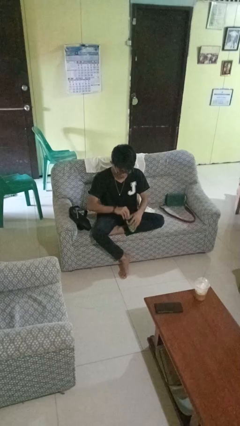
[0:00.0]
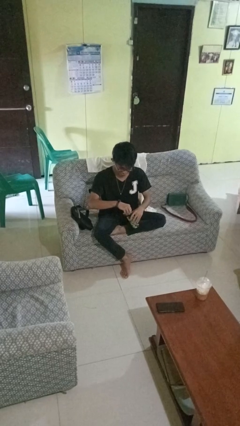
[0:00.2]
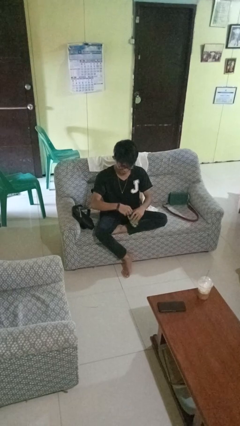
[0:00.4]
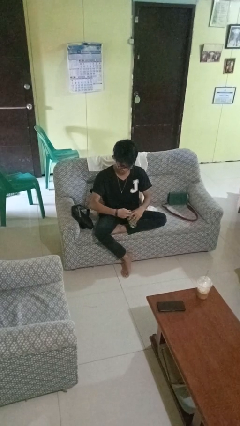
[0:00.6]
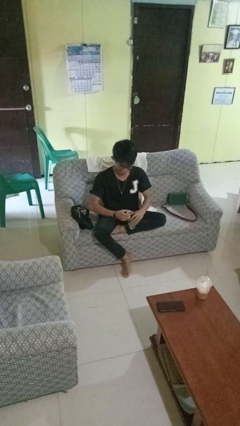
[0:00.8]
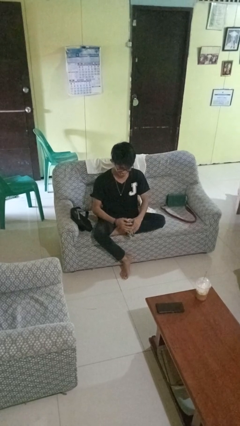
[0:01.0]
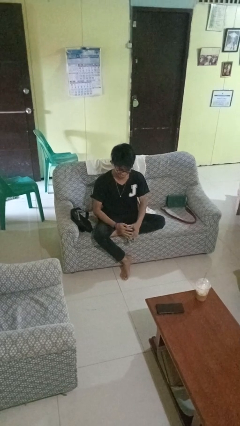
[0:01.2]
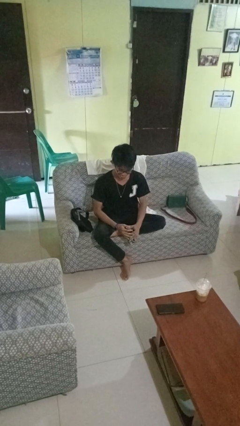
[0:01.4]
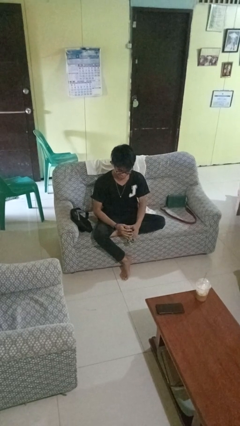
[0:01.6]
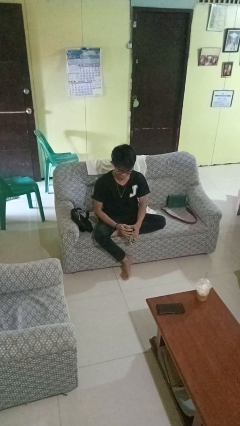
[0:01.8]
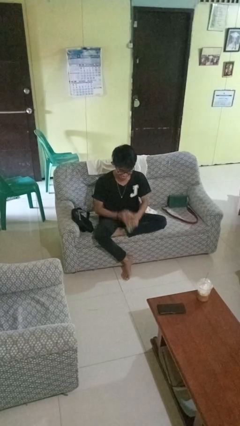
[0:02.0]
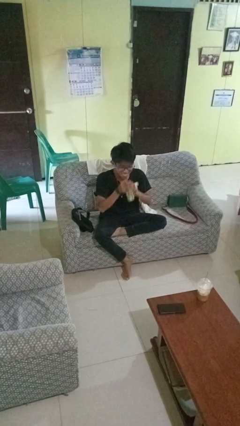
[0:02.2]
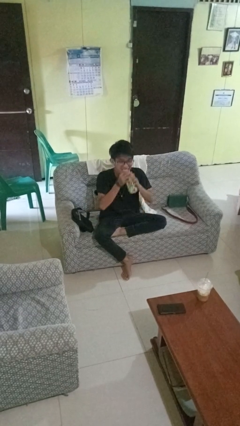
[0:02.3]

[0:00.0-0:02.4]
person opens beverage can

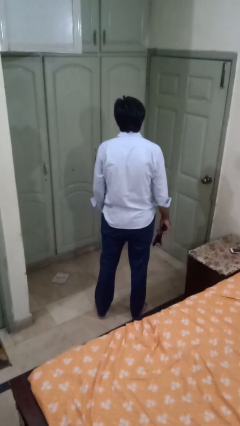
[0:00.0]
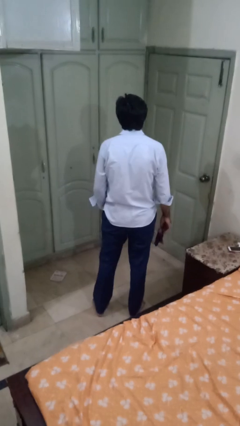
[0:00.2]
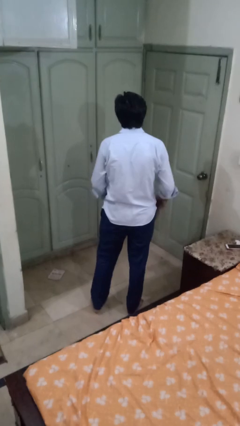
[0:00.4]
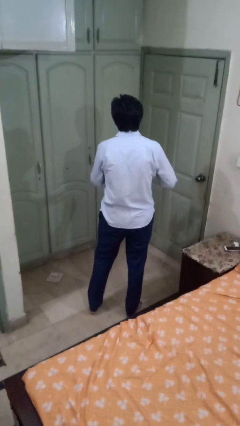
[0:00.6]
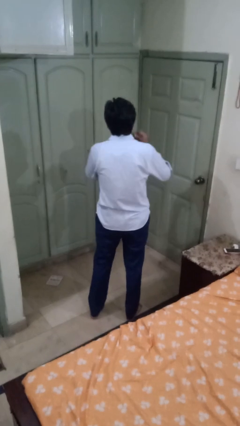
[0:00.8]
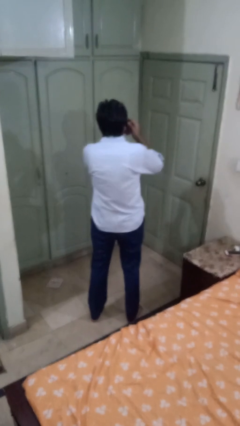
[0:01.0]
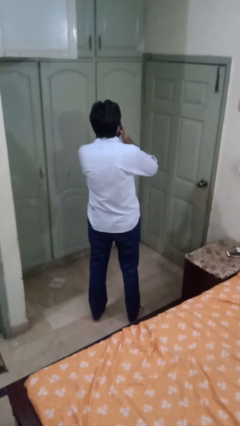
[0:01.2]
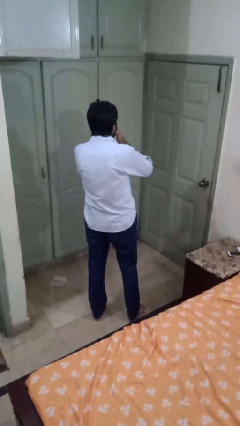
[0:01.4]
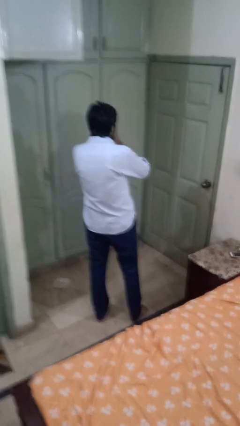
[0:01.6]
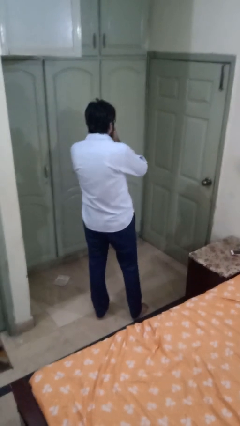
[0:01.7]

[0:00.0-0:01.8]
person blows nose

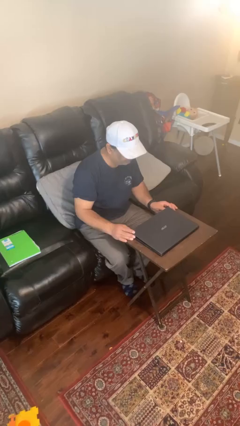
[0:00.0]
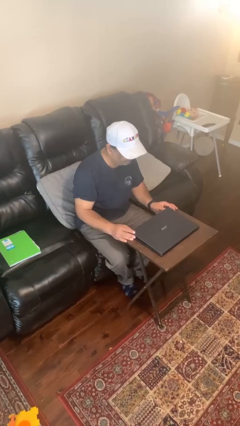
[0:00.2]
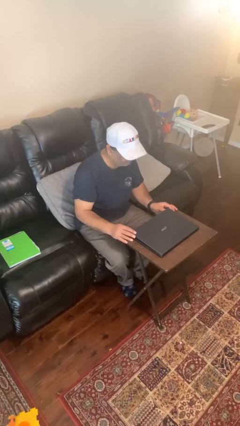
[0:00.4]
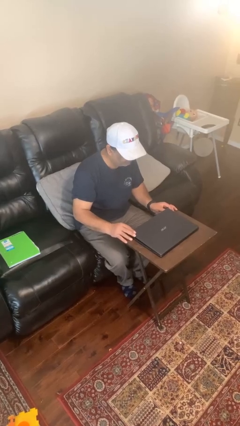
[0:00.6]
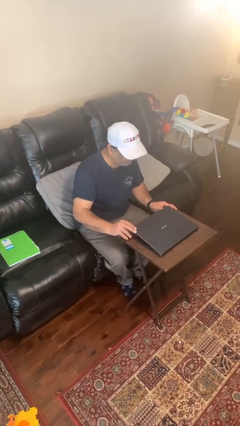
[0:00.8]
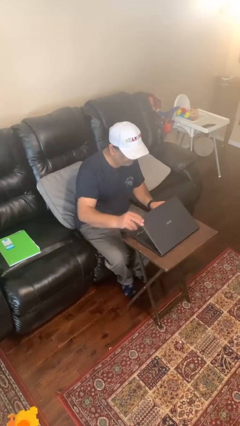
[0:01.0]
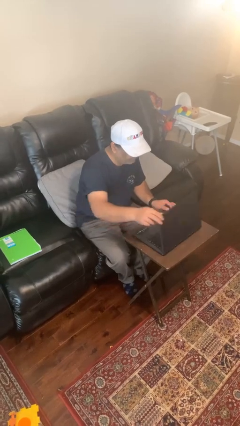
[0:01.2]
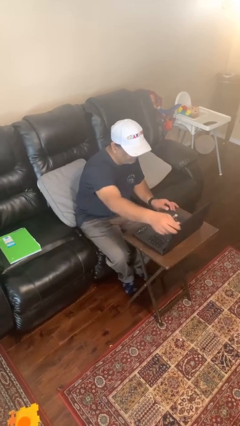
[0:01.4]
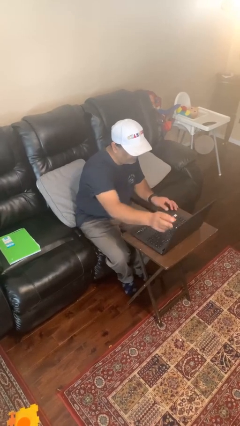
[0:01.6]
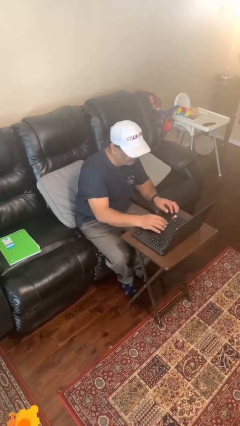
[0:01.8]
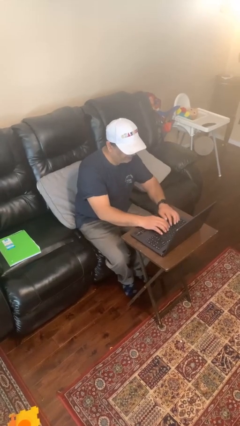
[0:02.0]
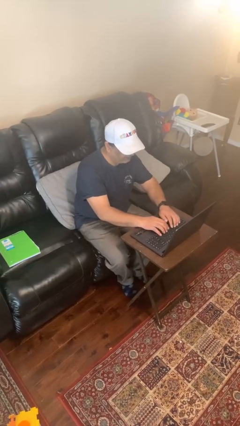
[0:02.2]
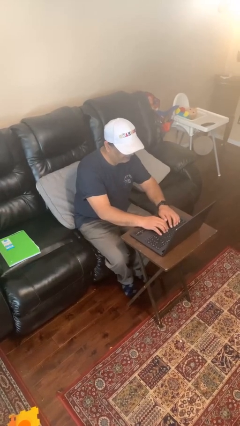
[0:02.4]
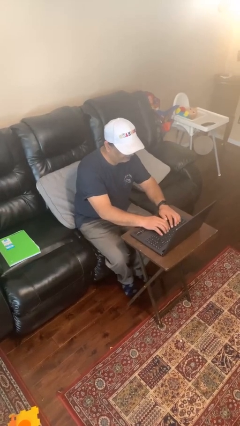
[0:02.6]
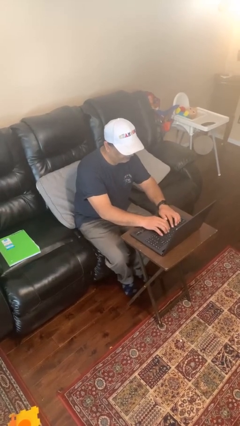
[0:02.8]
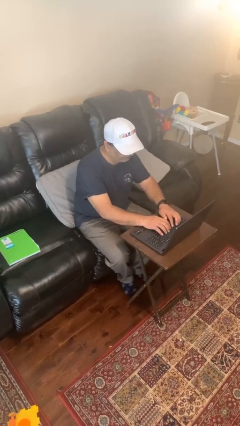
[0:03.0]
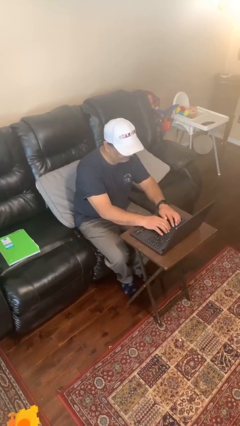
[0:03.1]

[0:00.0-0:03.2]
person interacts with laptop

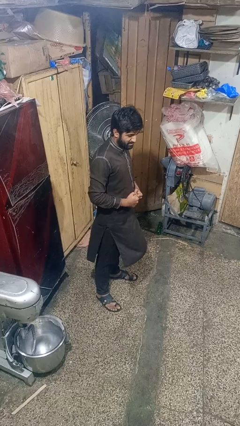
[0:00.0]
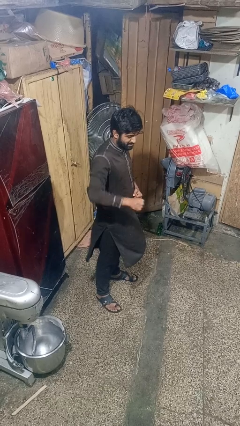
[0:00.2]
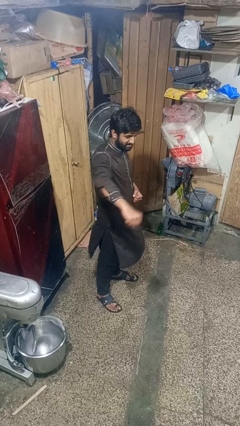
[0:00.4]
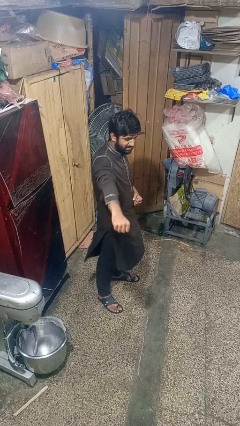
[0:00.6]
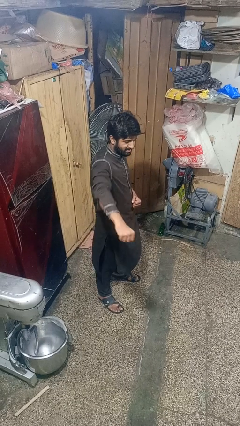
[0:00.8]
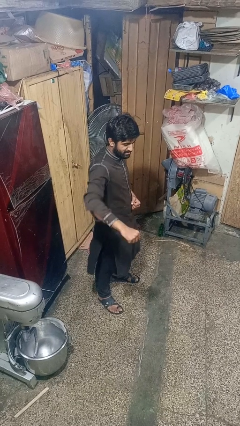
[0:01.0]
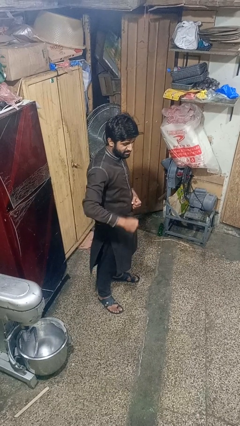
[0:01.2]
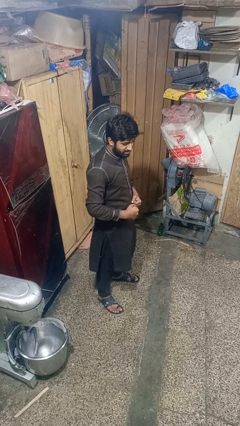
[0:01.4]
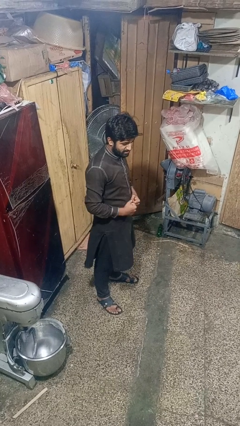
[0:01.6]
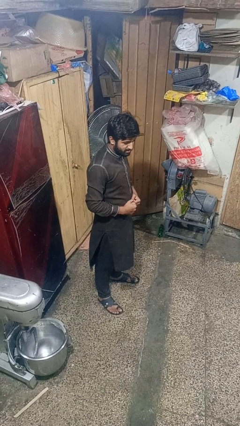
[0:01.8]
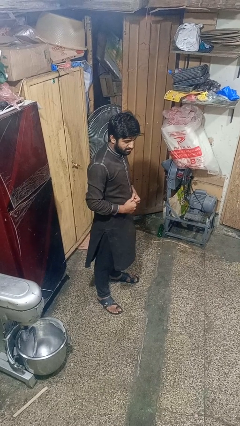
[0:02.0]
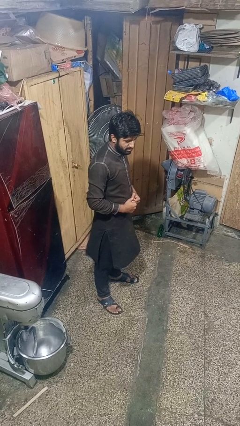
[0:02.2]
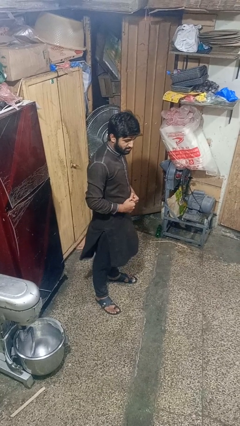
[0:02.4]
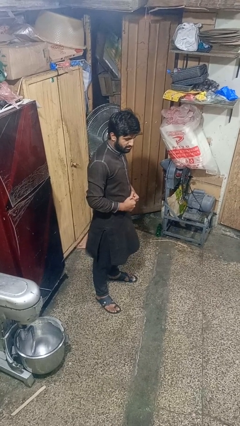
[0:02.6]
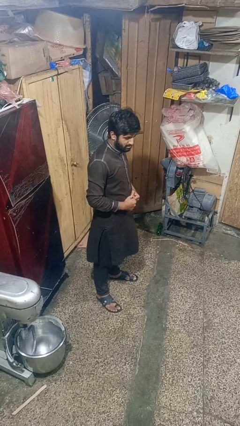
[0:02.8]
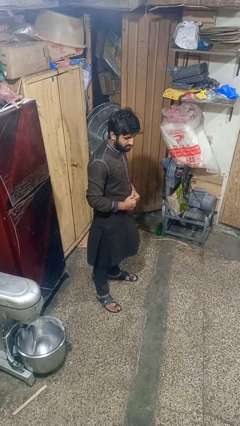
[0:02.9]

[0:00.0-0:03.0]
person karate chop

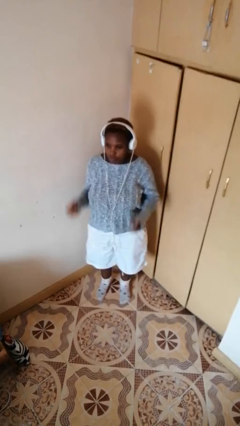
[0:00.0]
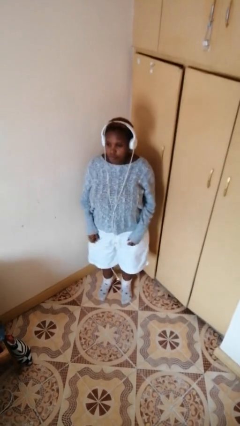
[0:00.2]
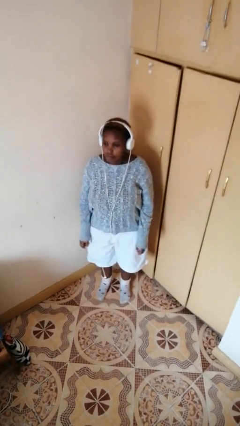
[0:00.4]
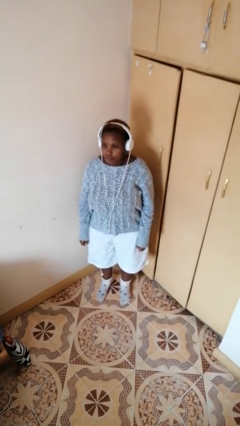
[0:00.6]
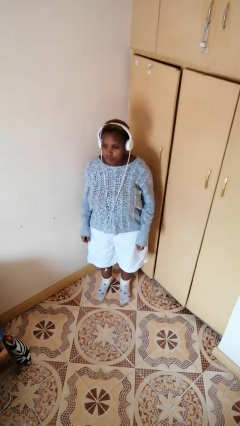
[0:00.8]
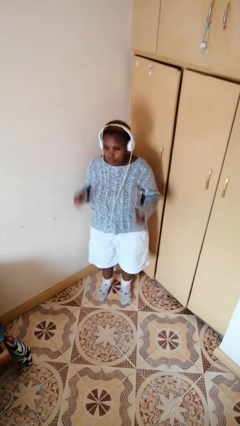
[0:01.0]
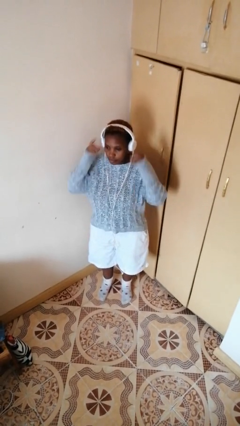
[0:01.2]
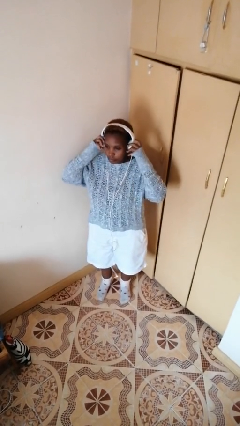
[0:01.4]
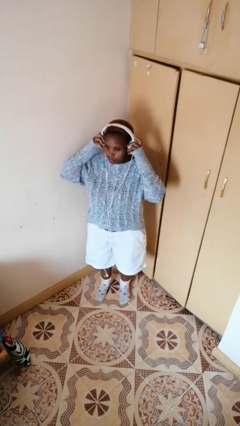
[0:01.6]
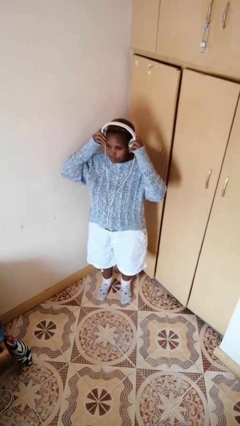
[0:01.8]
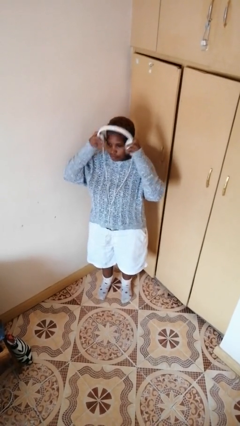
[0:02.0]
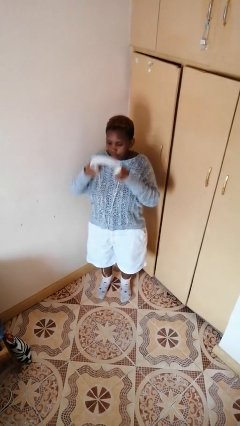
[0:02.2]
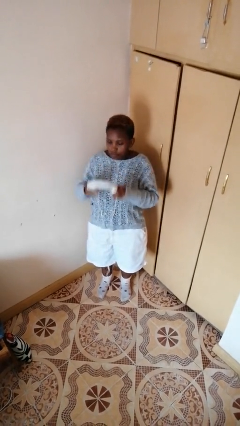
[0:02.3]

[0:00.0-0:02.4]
person takes off headphones

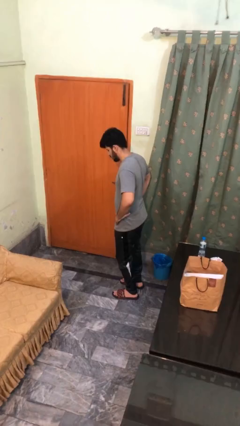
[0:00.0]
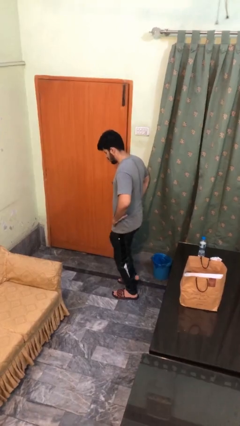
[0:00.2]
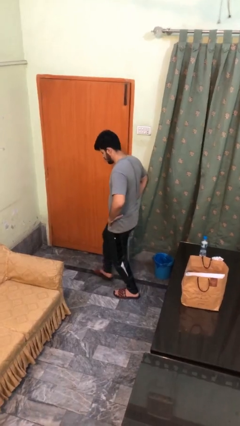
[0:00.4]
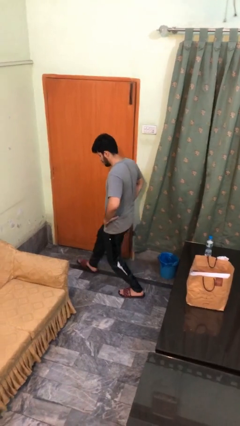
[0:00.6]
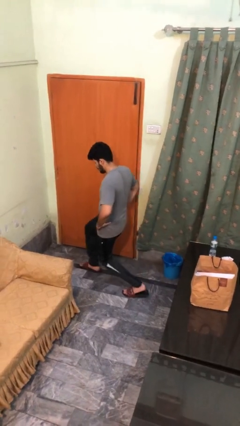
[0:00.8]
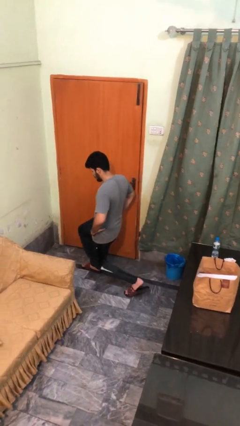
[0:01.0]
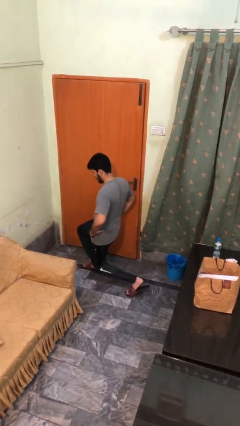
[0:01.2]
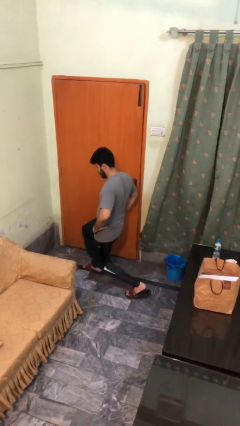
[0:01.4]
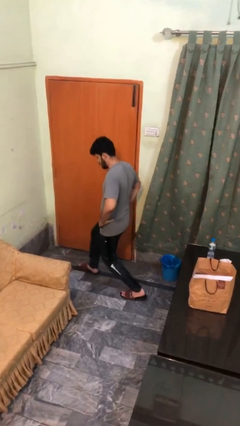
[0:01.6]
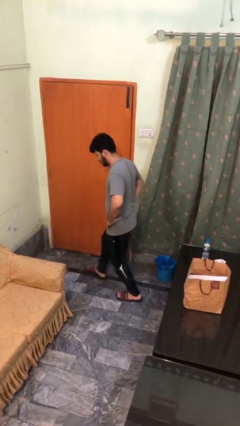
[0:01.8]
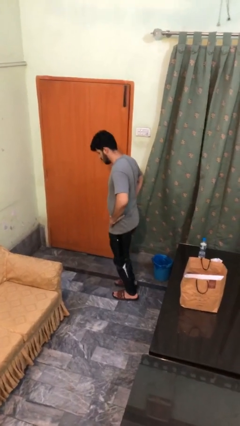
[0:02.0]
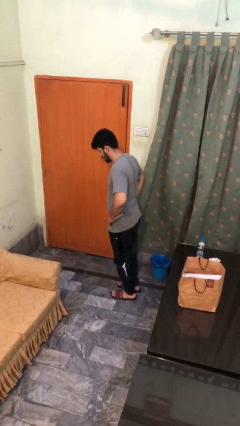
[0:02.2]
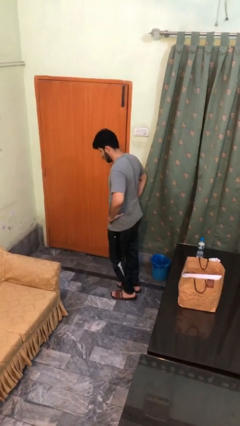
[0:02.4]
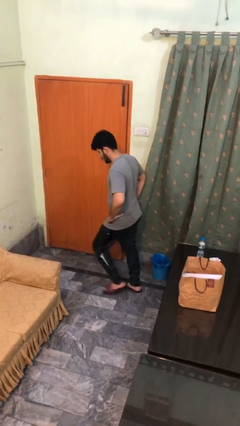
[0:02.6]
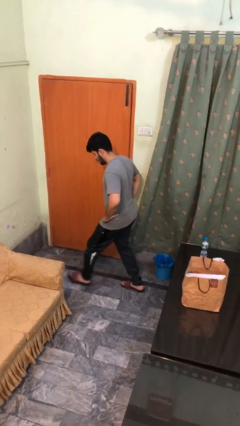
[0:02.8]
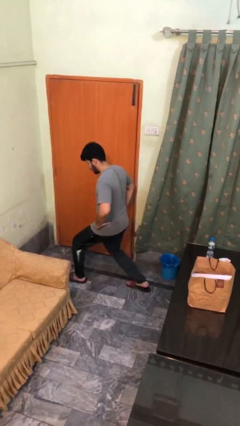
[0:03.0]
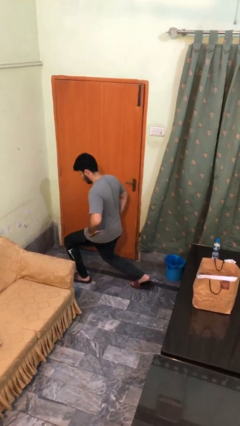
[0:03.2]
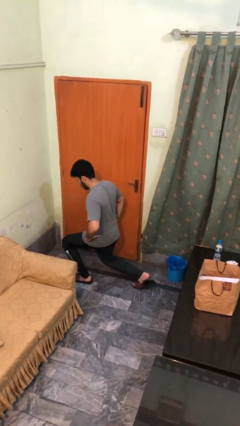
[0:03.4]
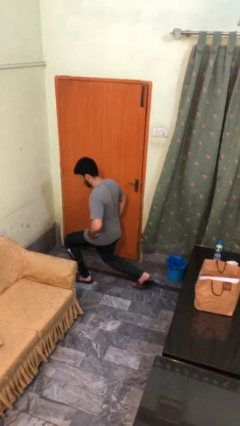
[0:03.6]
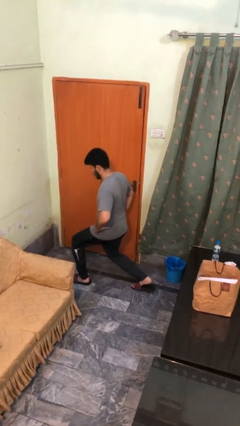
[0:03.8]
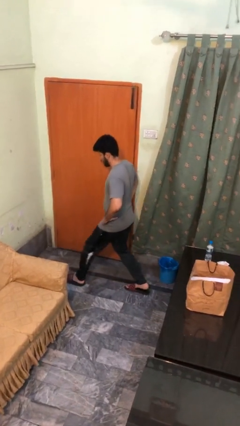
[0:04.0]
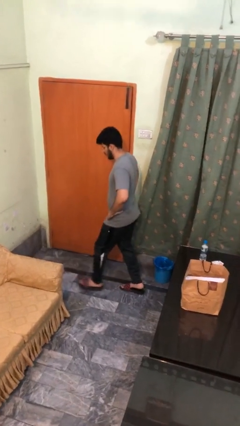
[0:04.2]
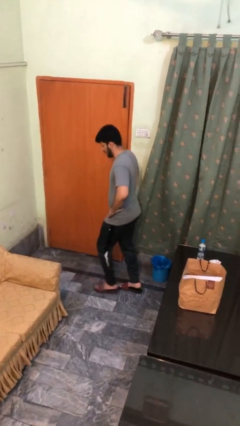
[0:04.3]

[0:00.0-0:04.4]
person exercises with lunges
